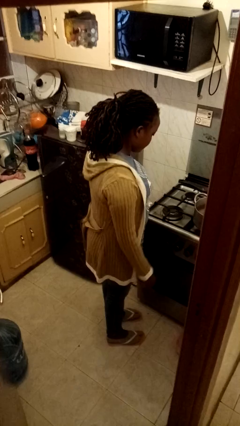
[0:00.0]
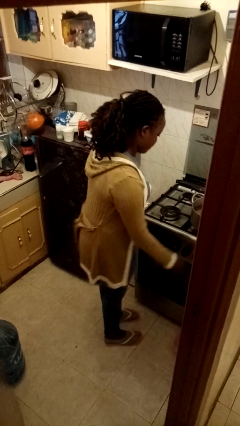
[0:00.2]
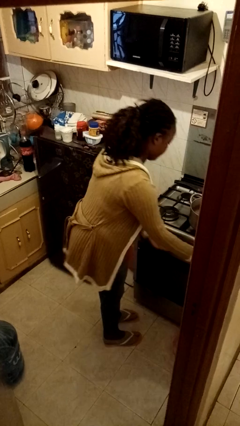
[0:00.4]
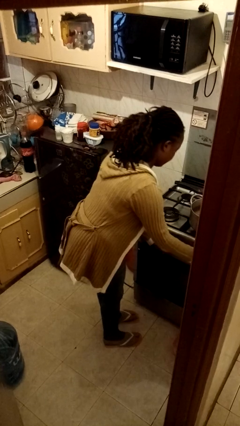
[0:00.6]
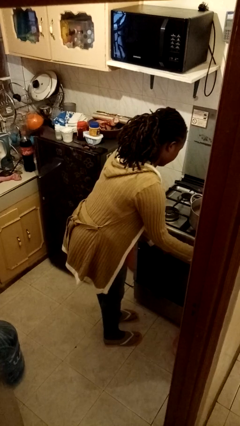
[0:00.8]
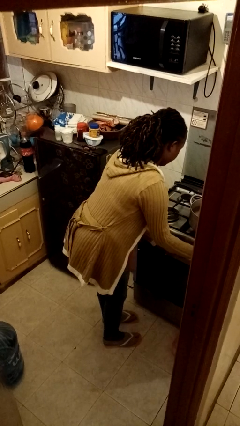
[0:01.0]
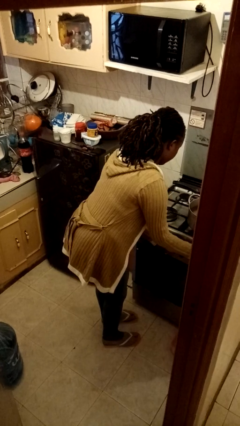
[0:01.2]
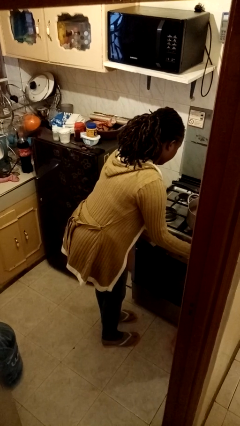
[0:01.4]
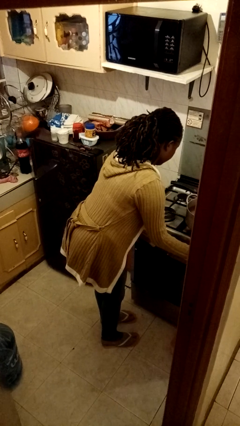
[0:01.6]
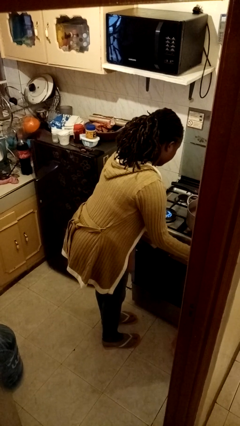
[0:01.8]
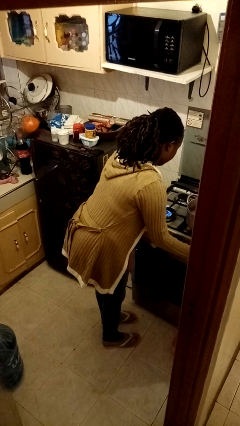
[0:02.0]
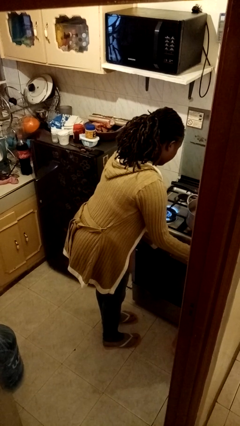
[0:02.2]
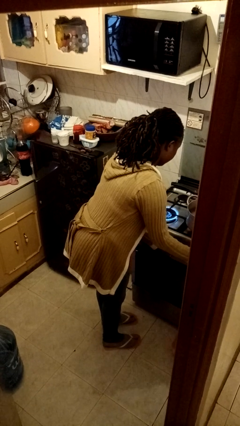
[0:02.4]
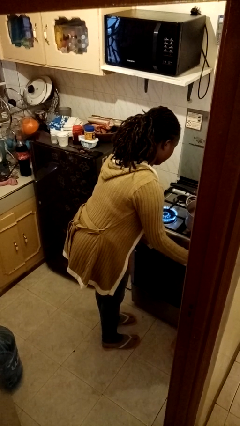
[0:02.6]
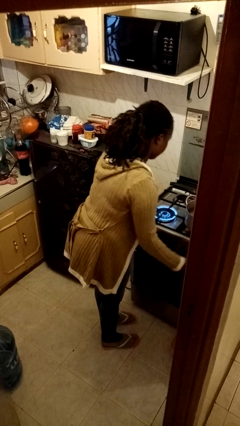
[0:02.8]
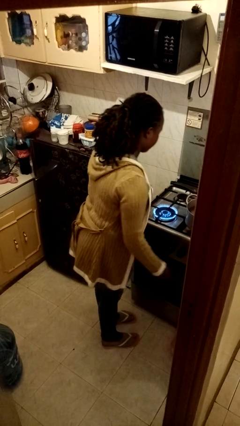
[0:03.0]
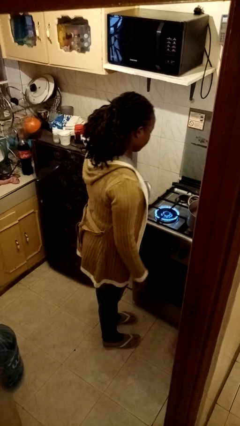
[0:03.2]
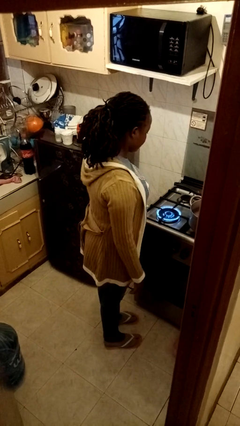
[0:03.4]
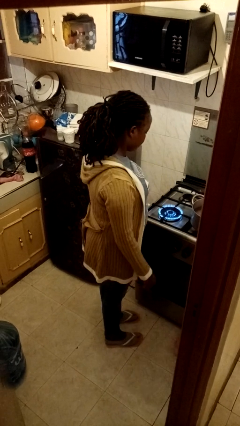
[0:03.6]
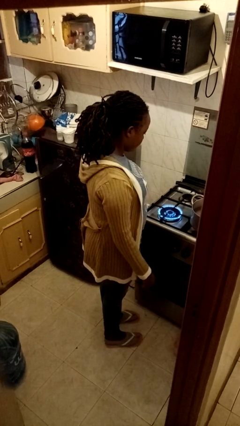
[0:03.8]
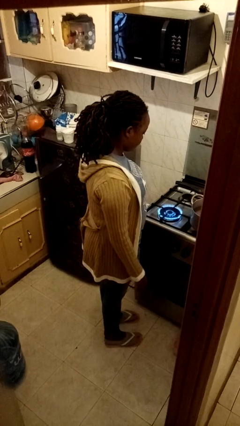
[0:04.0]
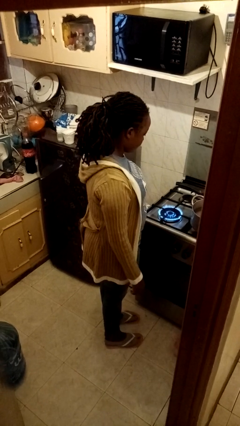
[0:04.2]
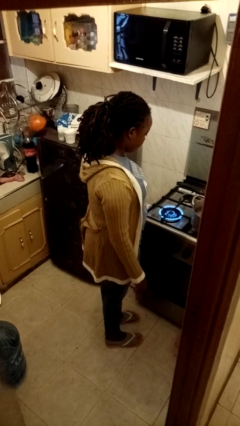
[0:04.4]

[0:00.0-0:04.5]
person turns on stovetop

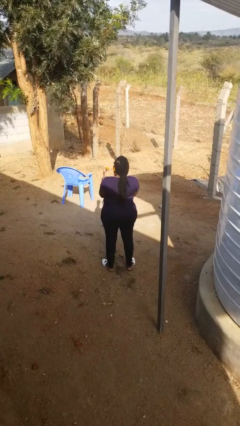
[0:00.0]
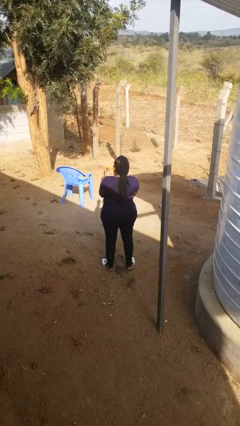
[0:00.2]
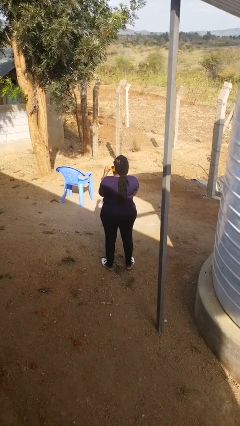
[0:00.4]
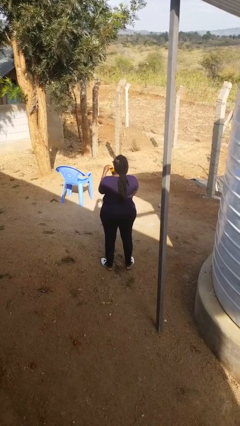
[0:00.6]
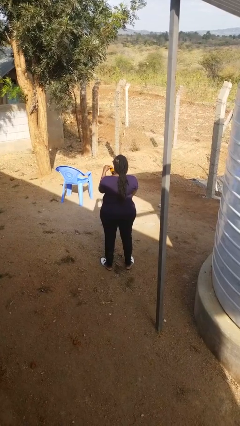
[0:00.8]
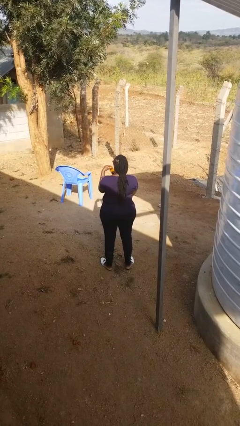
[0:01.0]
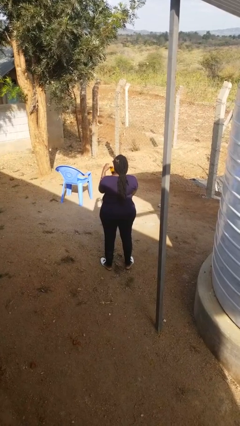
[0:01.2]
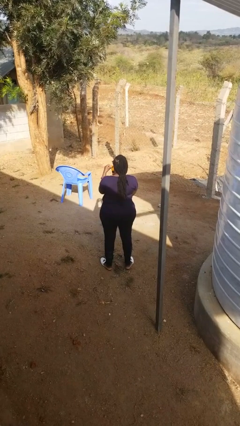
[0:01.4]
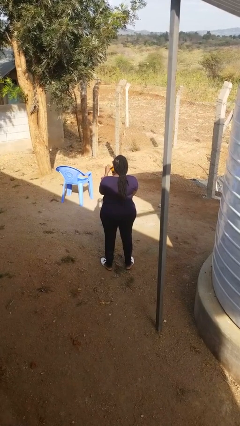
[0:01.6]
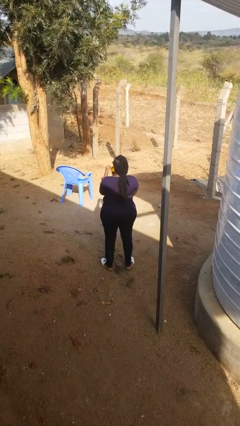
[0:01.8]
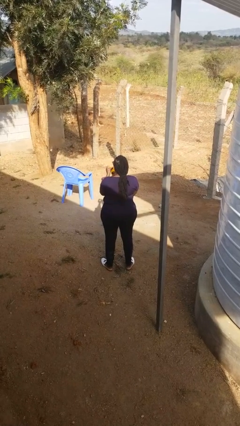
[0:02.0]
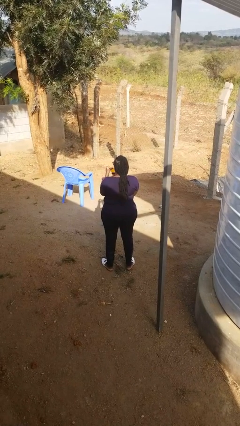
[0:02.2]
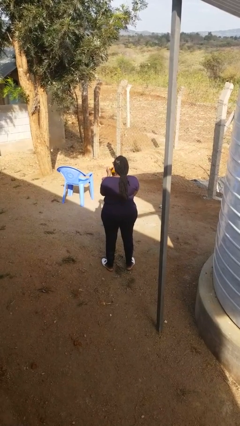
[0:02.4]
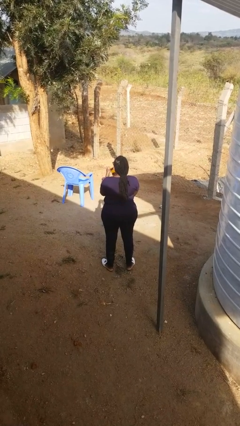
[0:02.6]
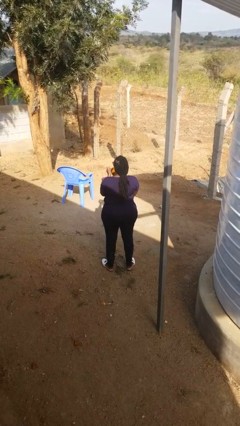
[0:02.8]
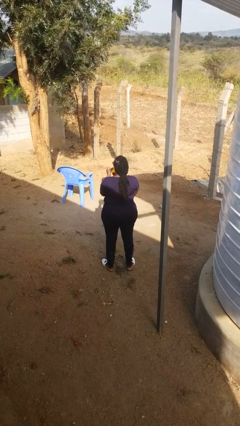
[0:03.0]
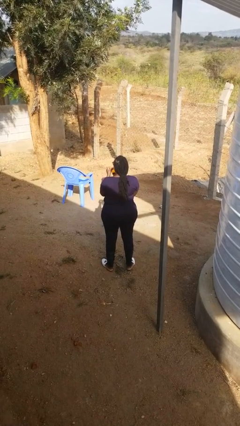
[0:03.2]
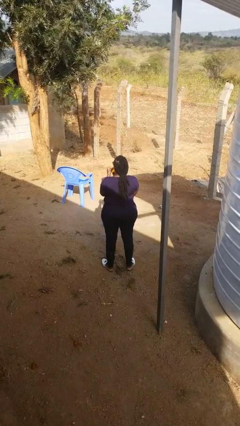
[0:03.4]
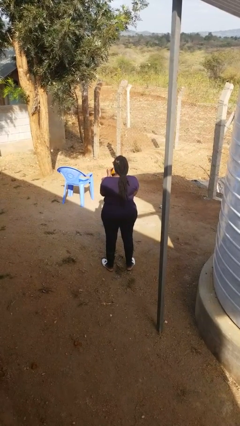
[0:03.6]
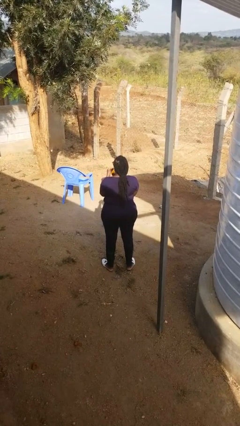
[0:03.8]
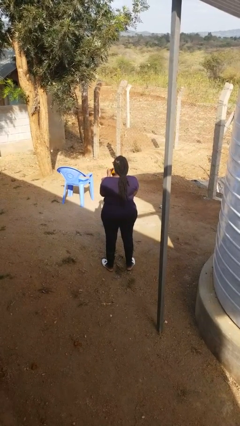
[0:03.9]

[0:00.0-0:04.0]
person closes jar

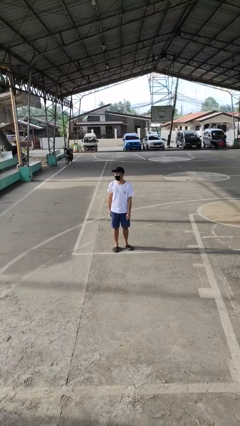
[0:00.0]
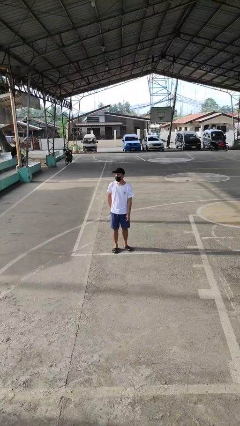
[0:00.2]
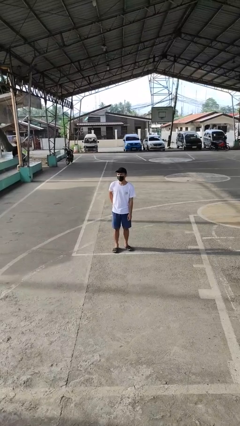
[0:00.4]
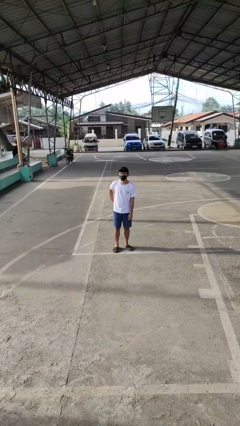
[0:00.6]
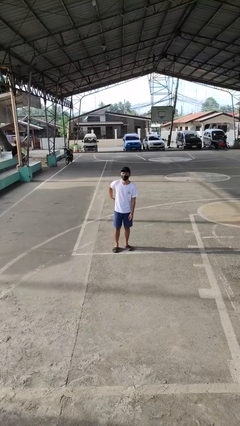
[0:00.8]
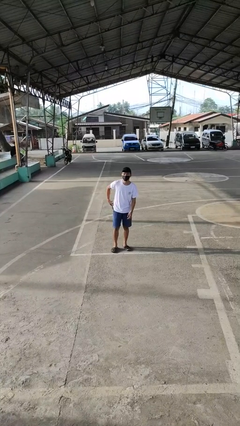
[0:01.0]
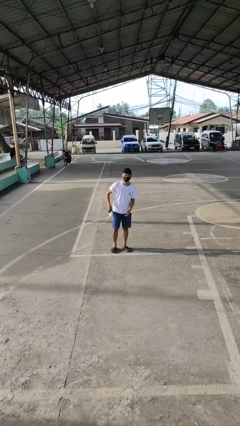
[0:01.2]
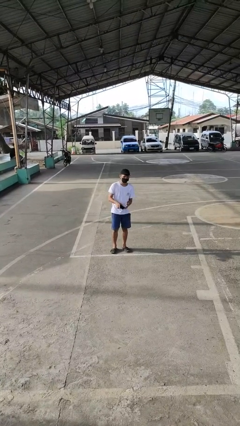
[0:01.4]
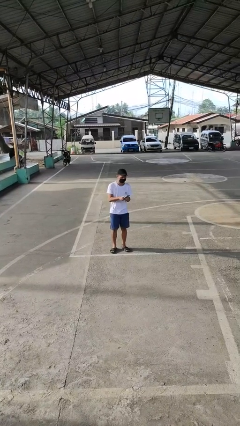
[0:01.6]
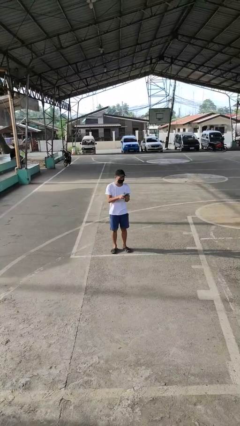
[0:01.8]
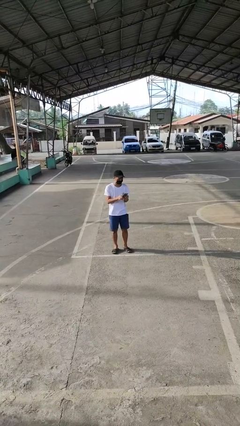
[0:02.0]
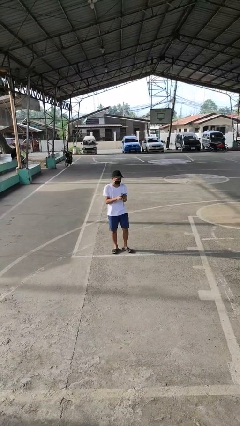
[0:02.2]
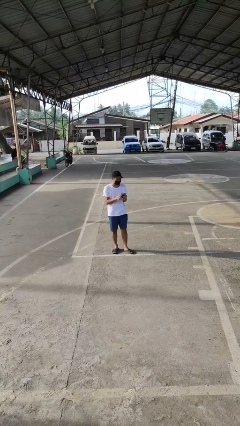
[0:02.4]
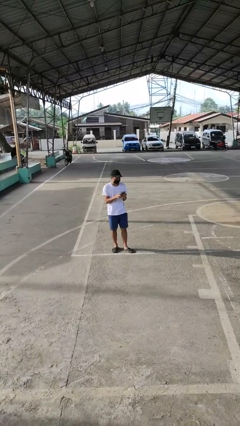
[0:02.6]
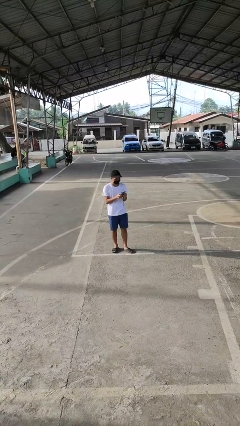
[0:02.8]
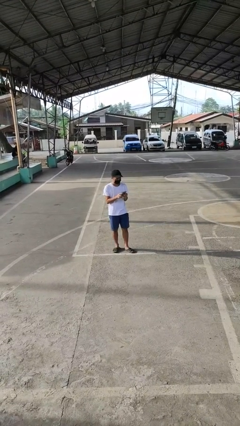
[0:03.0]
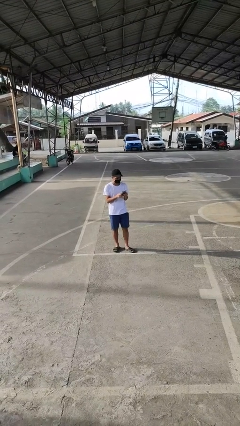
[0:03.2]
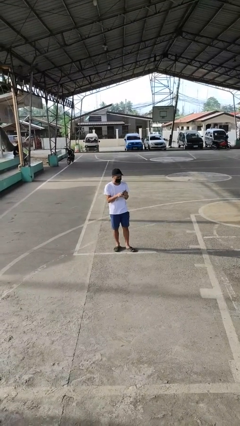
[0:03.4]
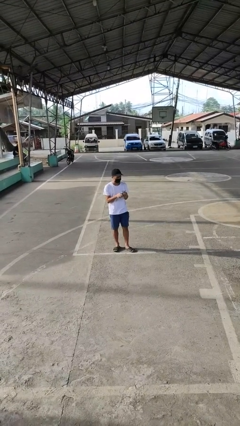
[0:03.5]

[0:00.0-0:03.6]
person takes phone from pocket

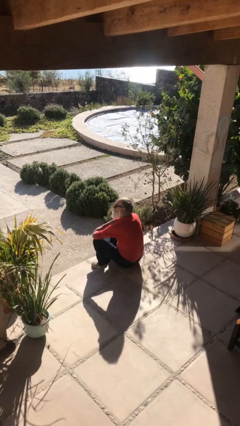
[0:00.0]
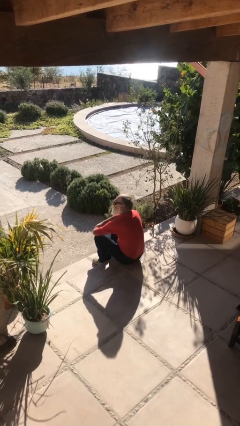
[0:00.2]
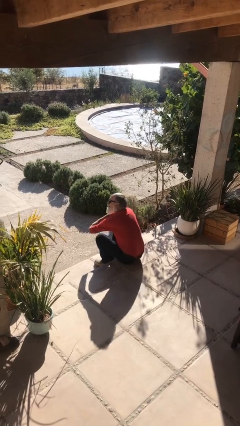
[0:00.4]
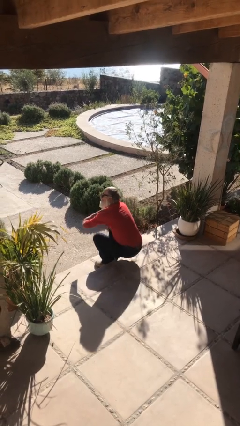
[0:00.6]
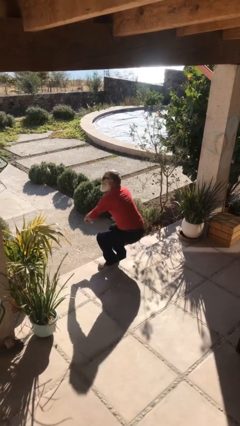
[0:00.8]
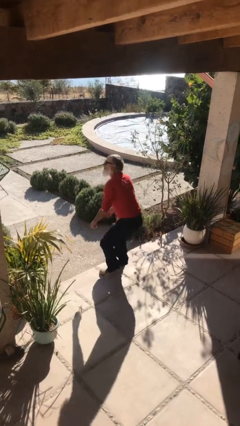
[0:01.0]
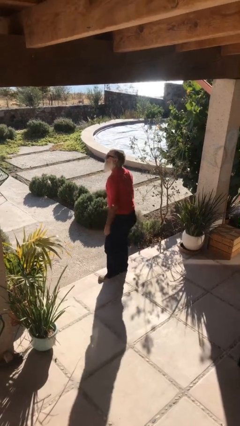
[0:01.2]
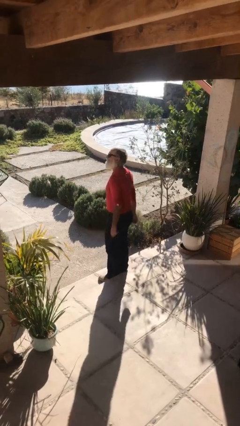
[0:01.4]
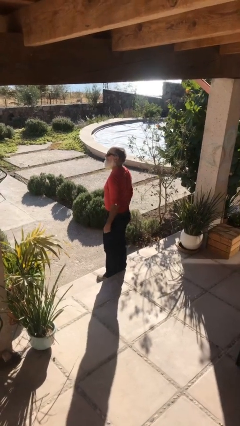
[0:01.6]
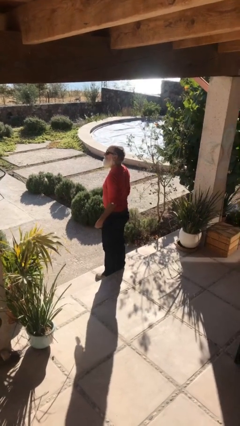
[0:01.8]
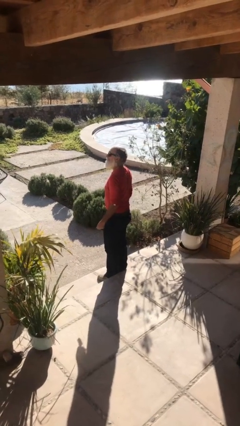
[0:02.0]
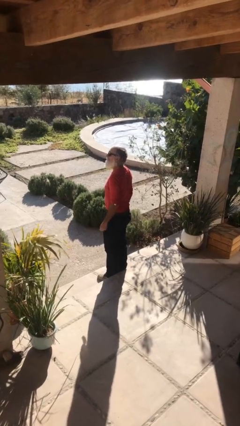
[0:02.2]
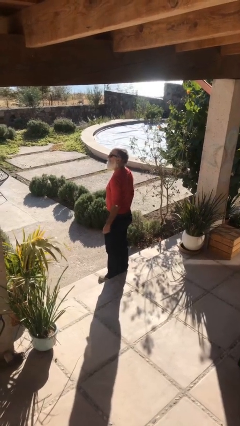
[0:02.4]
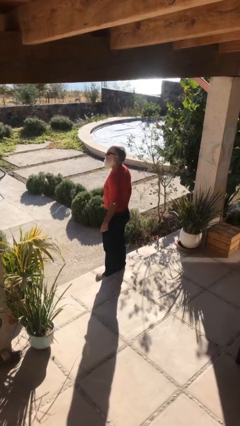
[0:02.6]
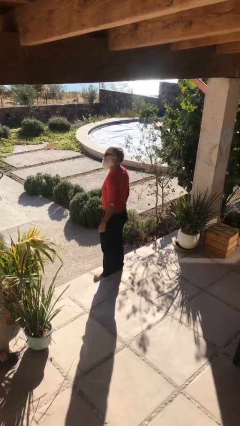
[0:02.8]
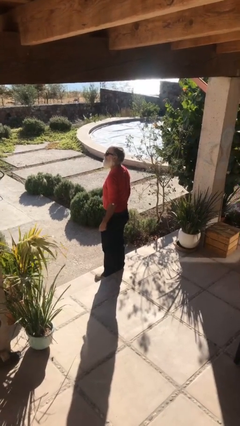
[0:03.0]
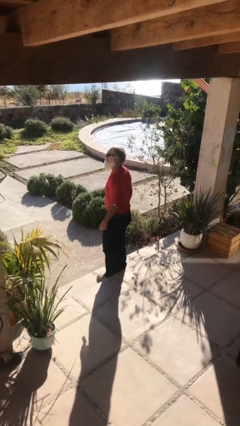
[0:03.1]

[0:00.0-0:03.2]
person stands up

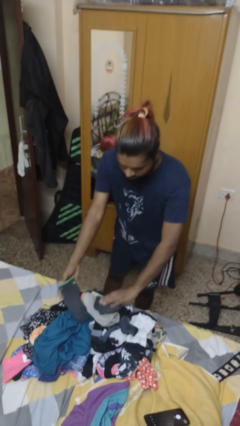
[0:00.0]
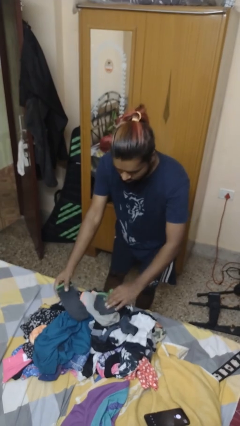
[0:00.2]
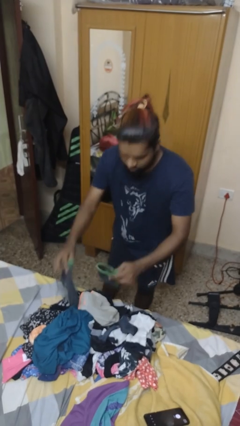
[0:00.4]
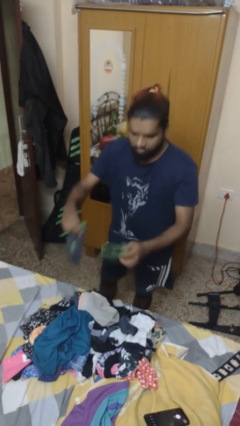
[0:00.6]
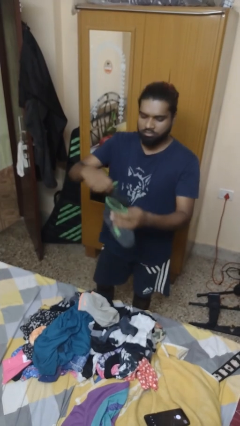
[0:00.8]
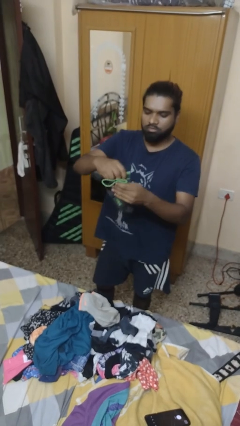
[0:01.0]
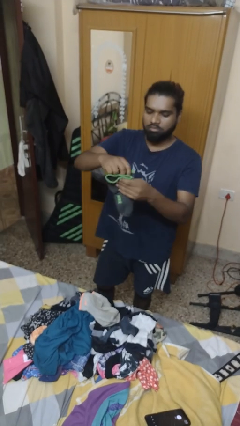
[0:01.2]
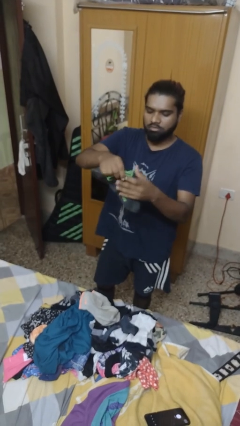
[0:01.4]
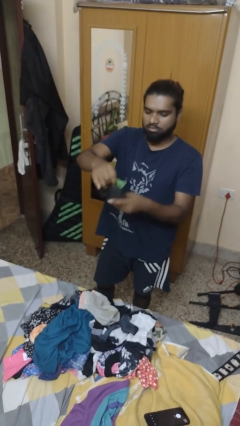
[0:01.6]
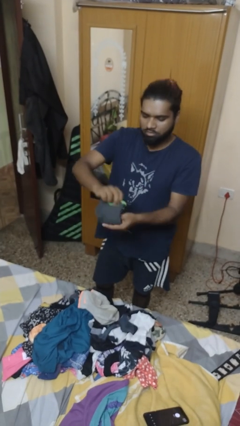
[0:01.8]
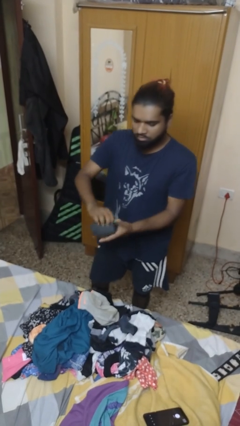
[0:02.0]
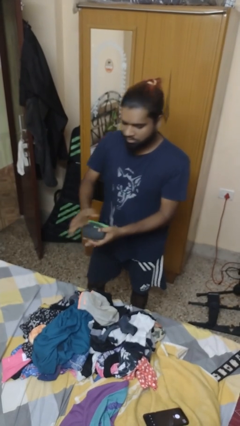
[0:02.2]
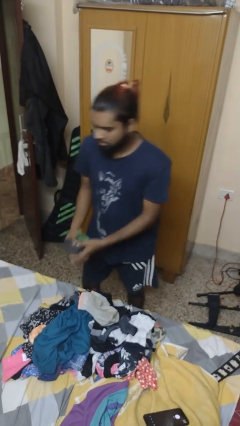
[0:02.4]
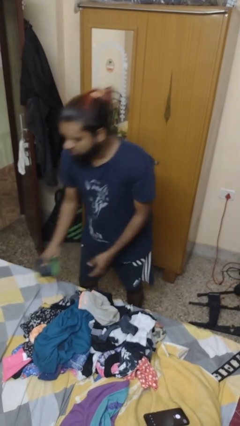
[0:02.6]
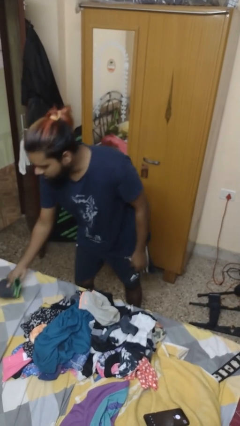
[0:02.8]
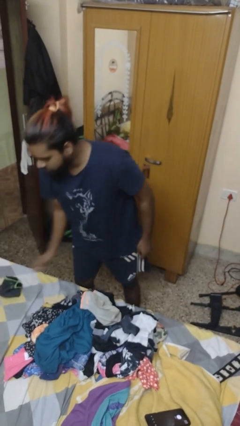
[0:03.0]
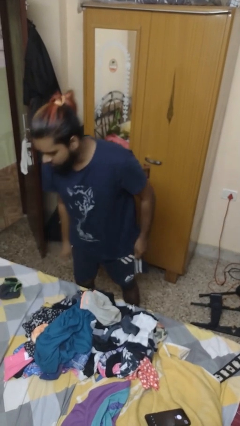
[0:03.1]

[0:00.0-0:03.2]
person folds socks
